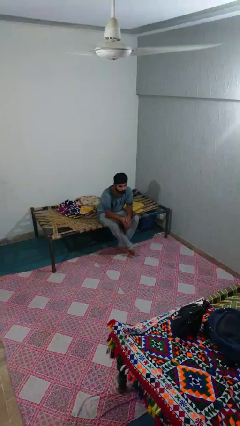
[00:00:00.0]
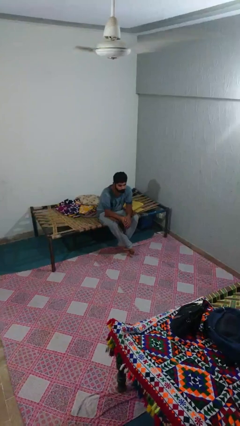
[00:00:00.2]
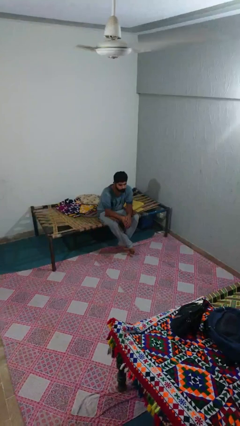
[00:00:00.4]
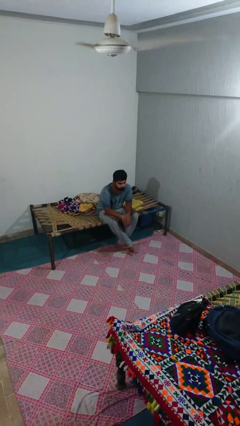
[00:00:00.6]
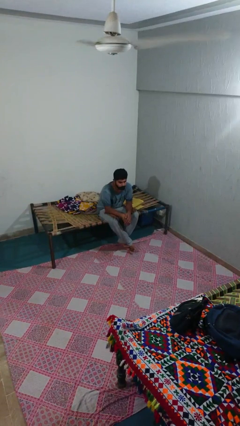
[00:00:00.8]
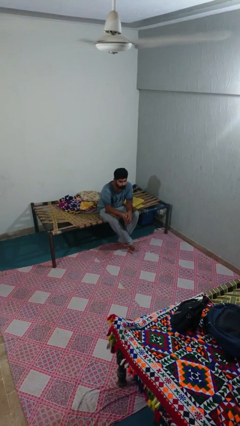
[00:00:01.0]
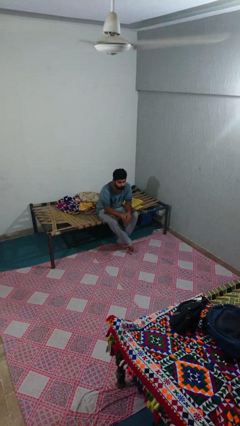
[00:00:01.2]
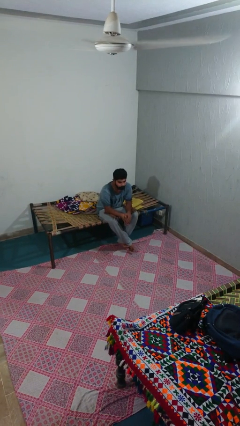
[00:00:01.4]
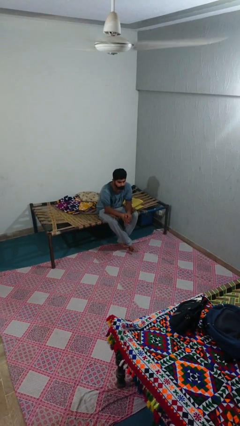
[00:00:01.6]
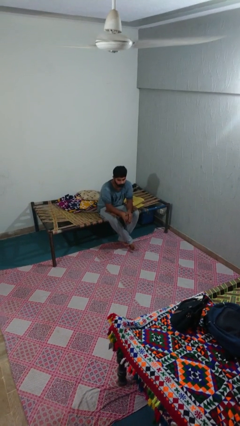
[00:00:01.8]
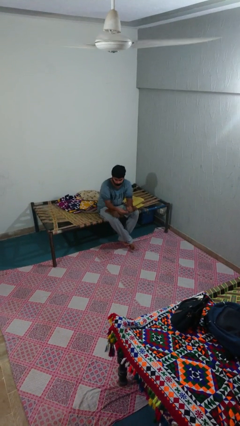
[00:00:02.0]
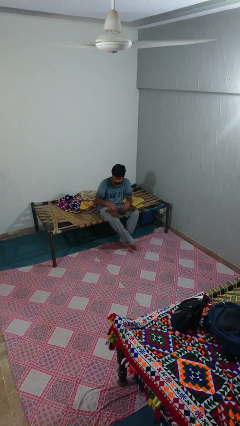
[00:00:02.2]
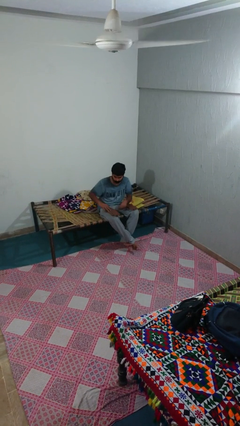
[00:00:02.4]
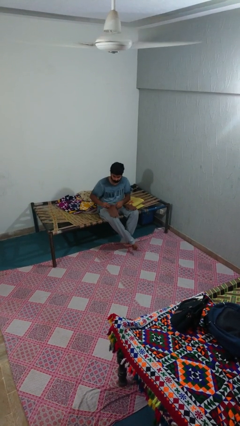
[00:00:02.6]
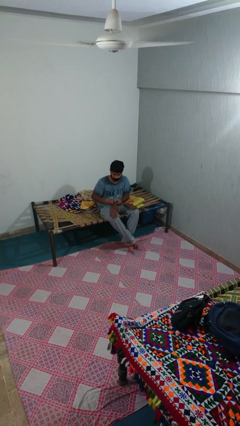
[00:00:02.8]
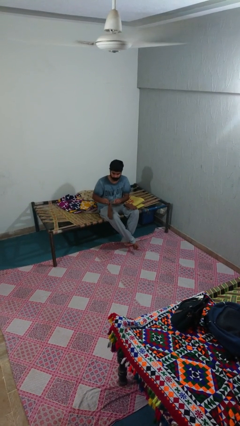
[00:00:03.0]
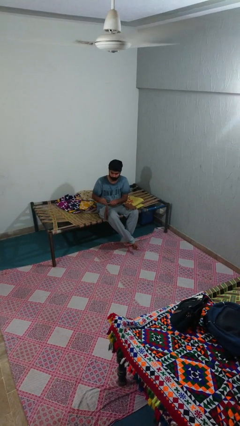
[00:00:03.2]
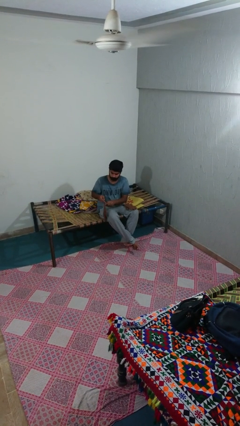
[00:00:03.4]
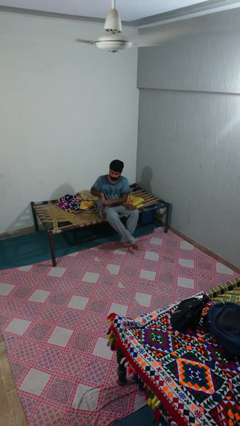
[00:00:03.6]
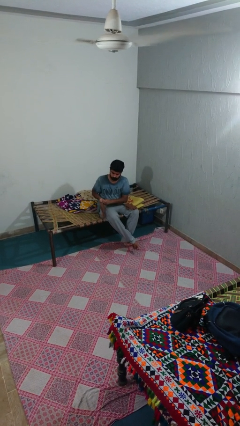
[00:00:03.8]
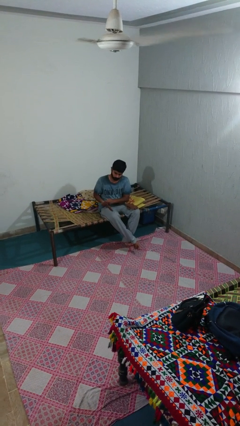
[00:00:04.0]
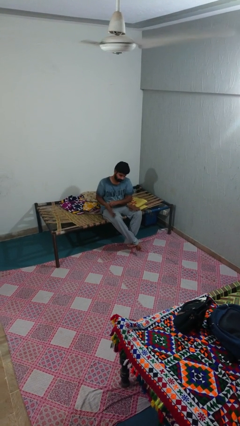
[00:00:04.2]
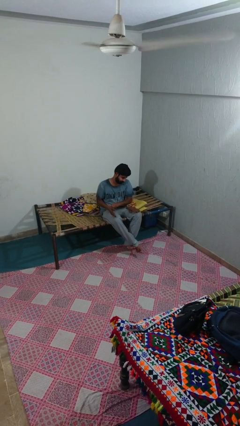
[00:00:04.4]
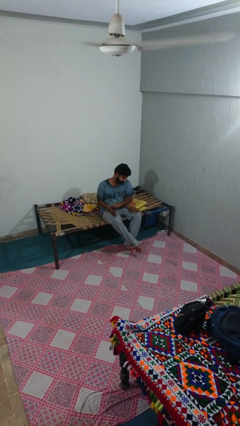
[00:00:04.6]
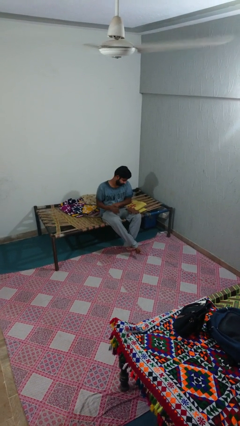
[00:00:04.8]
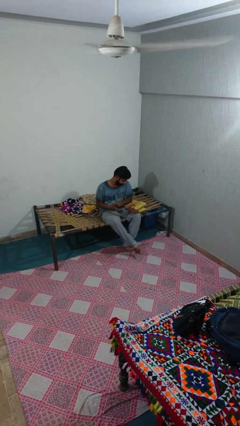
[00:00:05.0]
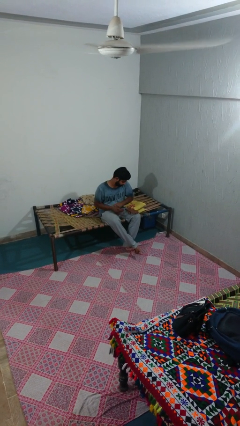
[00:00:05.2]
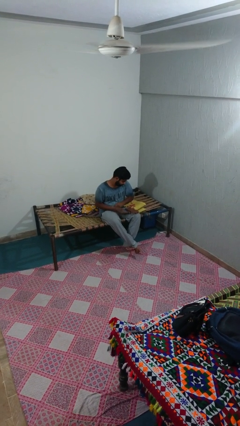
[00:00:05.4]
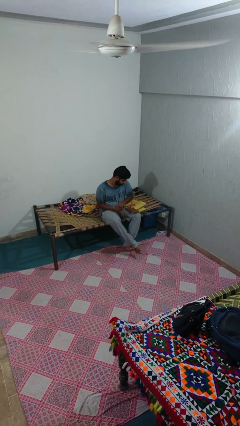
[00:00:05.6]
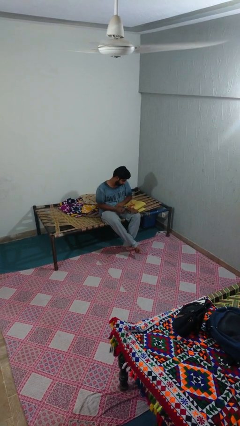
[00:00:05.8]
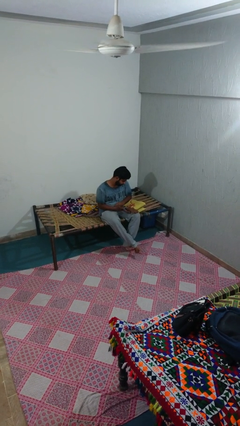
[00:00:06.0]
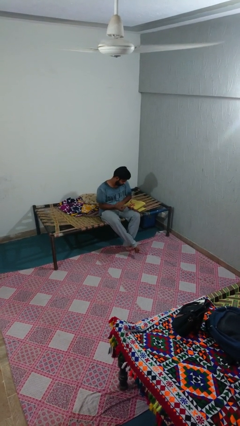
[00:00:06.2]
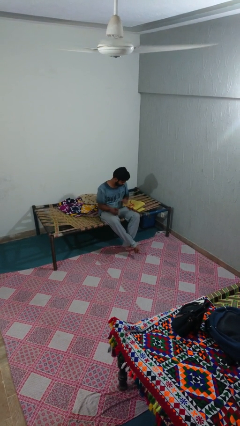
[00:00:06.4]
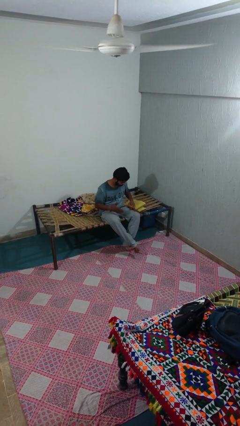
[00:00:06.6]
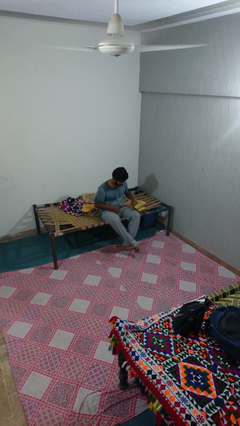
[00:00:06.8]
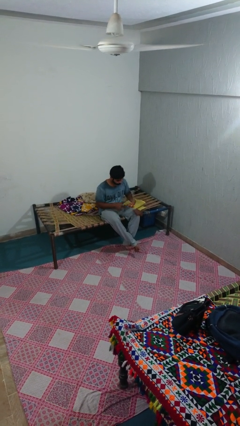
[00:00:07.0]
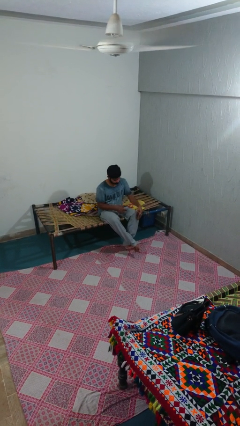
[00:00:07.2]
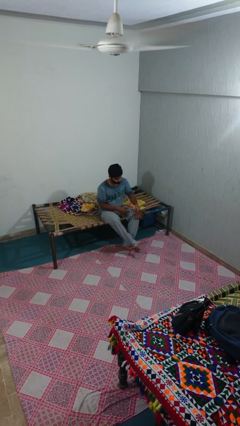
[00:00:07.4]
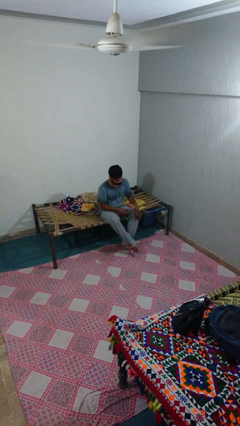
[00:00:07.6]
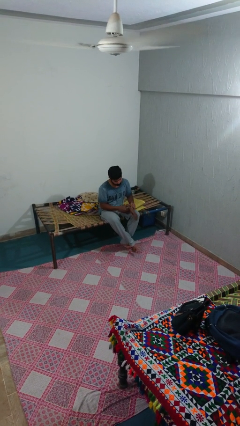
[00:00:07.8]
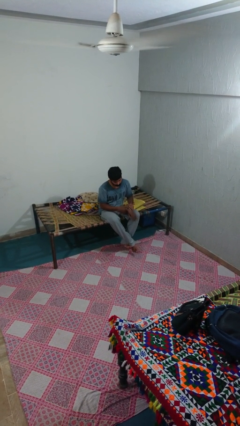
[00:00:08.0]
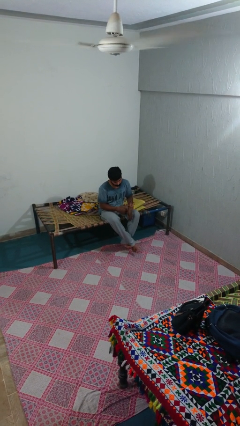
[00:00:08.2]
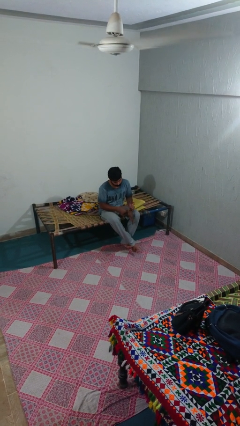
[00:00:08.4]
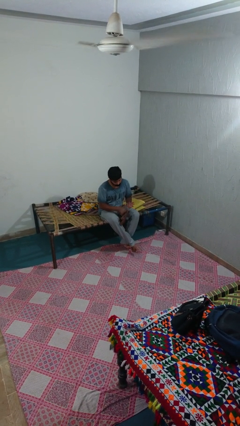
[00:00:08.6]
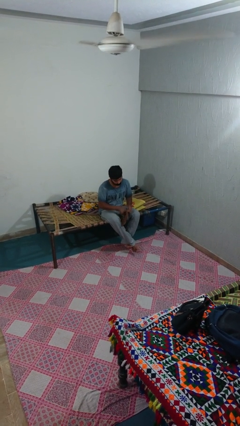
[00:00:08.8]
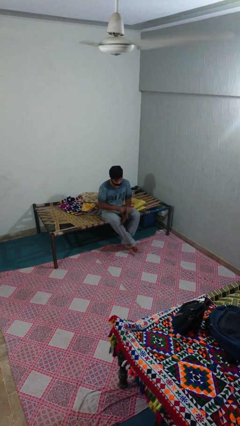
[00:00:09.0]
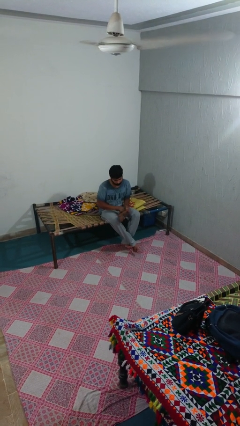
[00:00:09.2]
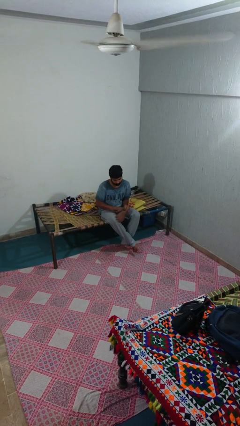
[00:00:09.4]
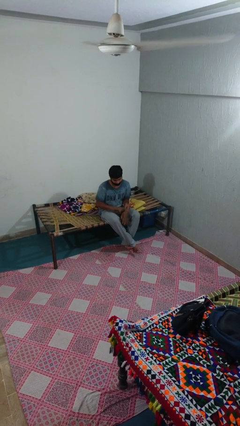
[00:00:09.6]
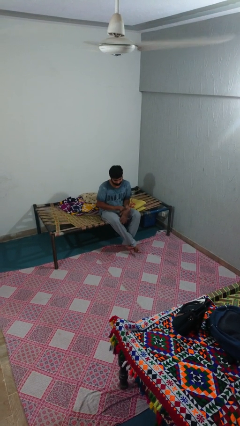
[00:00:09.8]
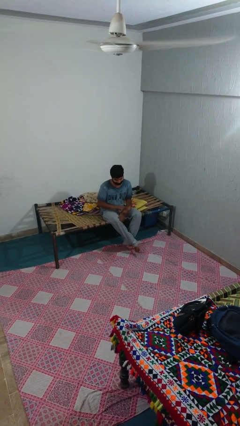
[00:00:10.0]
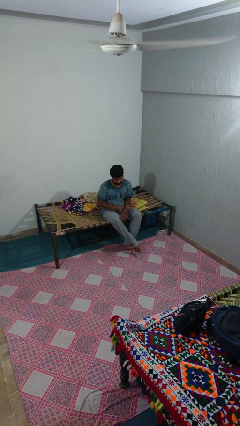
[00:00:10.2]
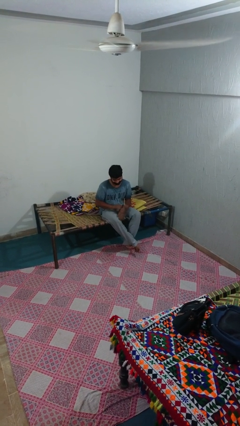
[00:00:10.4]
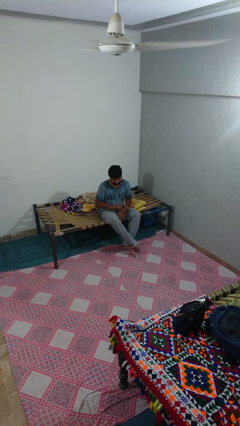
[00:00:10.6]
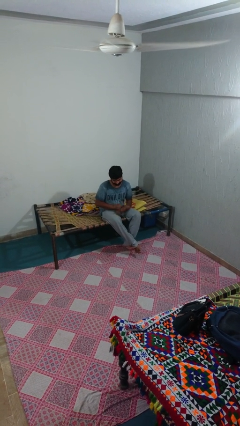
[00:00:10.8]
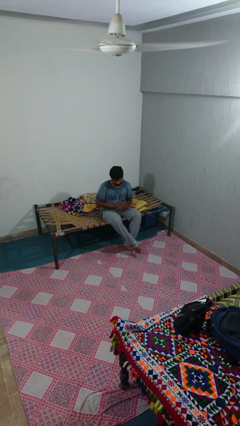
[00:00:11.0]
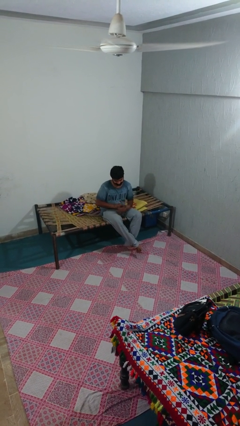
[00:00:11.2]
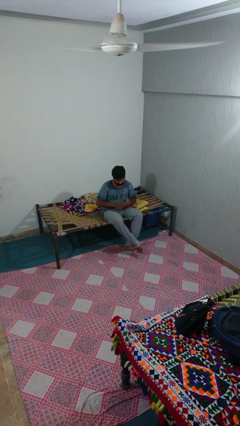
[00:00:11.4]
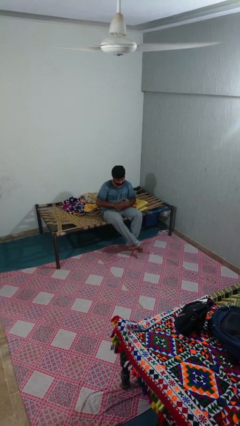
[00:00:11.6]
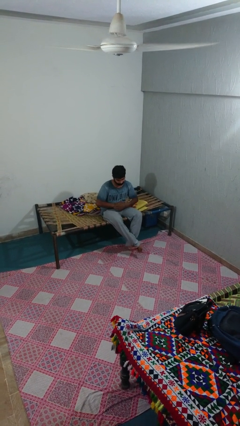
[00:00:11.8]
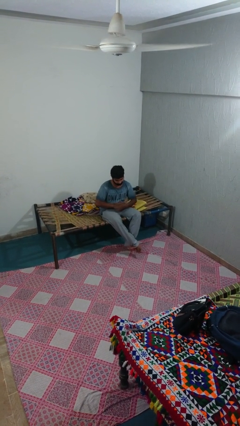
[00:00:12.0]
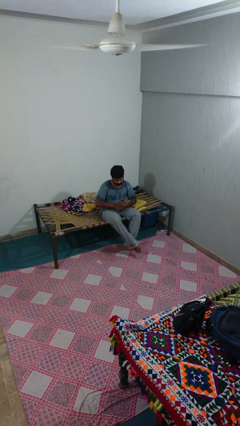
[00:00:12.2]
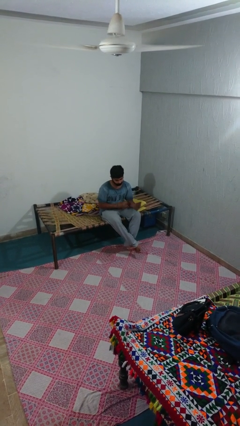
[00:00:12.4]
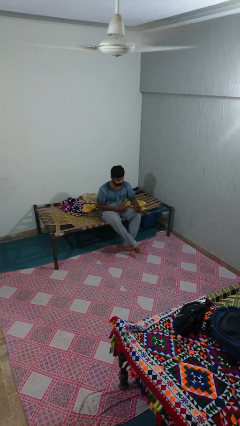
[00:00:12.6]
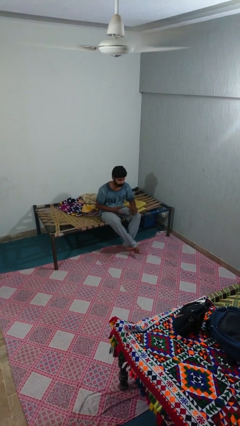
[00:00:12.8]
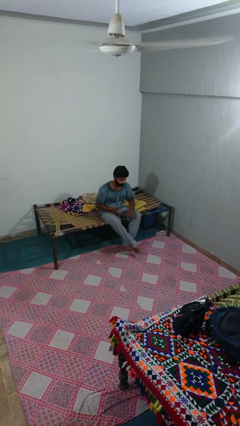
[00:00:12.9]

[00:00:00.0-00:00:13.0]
person puts on gloves

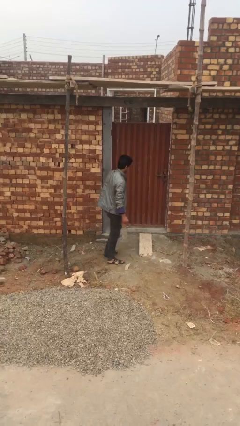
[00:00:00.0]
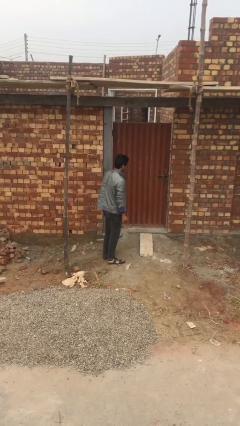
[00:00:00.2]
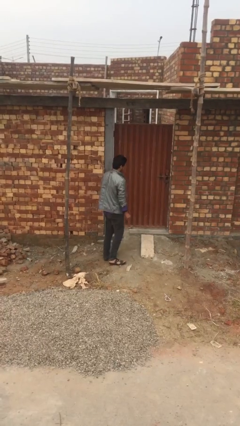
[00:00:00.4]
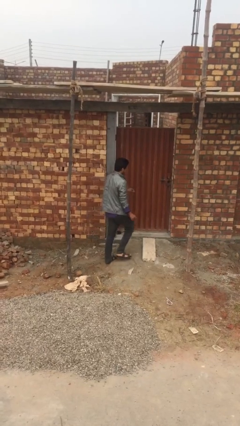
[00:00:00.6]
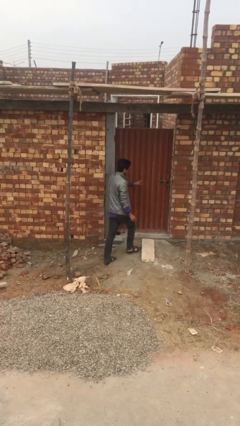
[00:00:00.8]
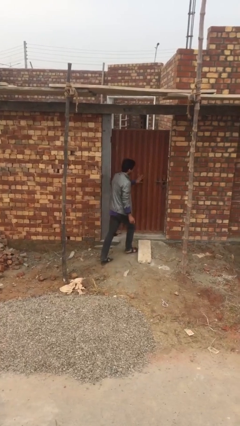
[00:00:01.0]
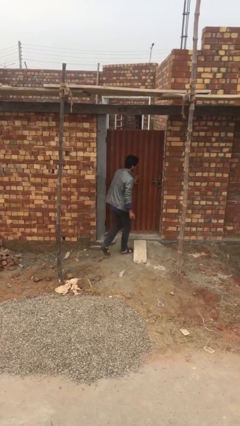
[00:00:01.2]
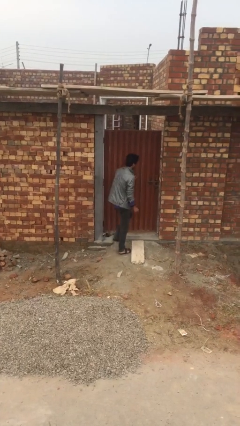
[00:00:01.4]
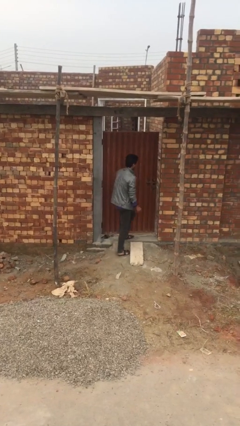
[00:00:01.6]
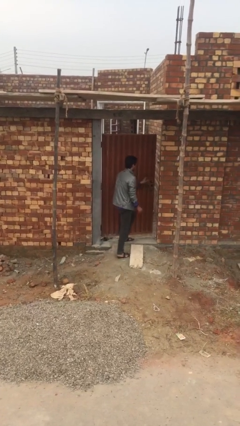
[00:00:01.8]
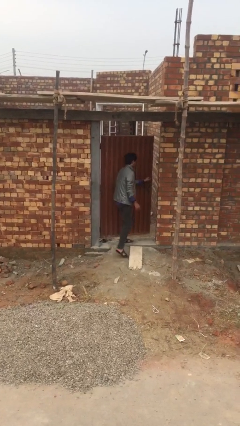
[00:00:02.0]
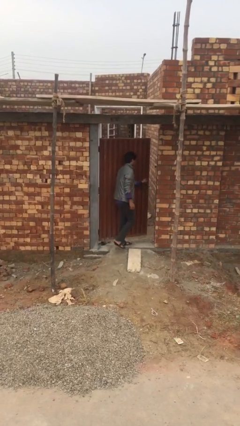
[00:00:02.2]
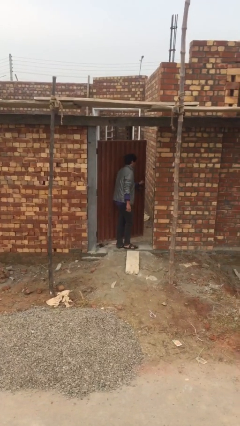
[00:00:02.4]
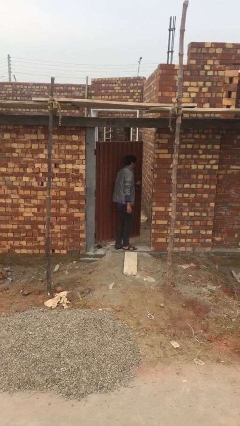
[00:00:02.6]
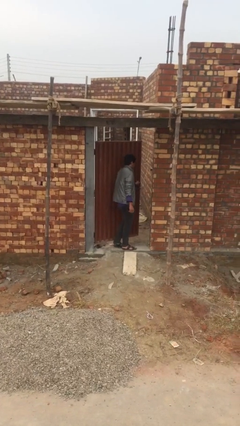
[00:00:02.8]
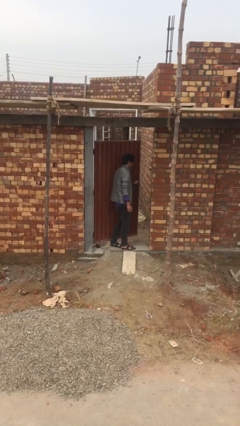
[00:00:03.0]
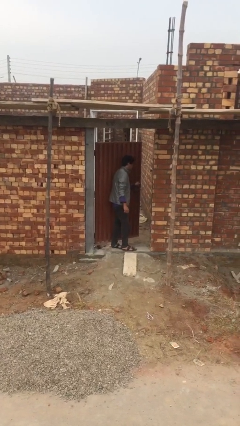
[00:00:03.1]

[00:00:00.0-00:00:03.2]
person opens facility door

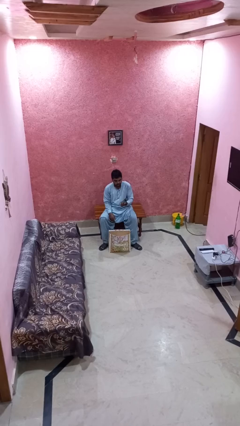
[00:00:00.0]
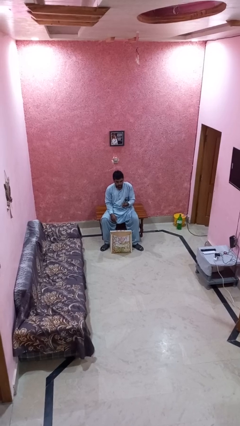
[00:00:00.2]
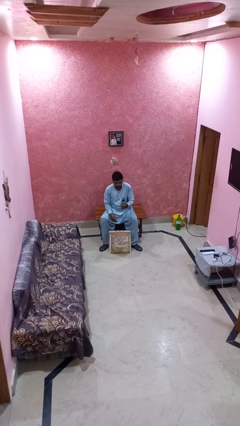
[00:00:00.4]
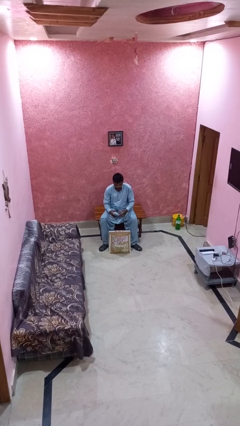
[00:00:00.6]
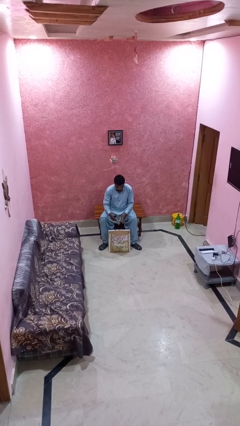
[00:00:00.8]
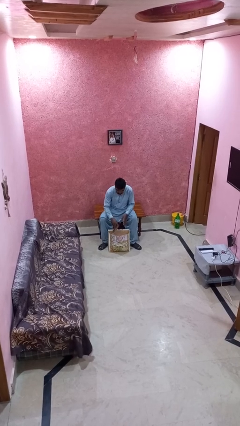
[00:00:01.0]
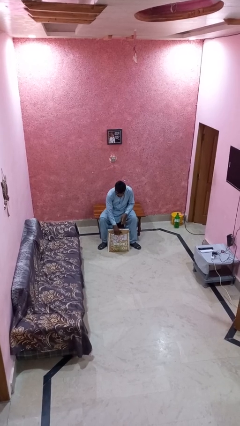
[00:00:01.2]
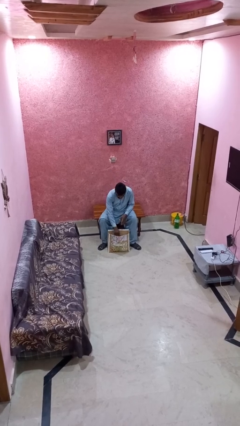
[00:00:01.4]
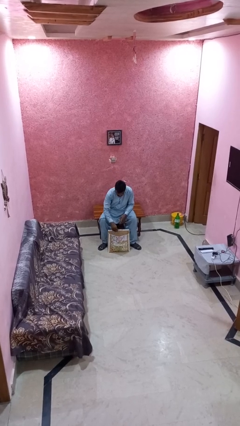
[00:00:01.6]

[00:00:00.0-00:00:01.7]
person puts object into bag

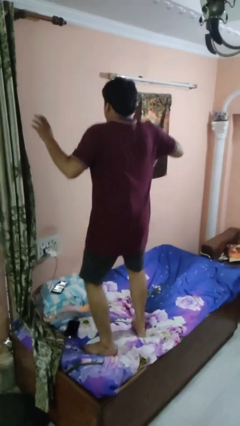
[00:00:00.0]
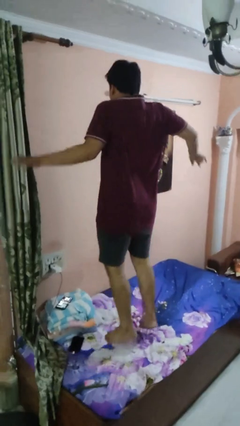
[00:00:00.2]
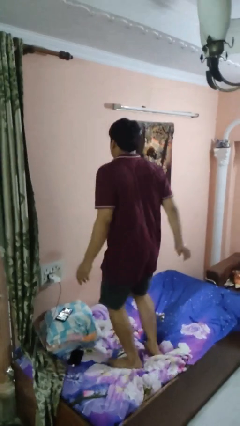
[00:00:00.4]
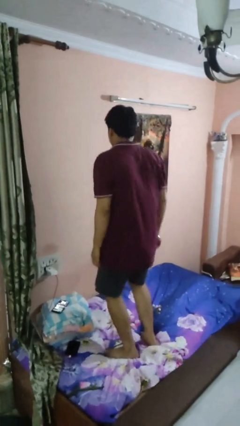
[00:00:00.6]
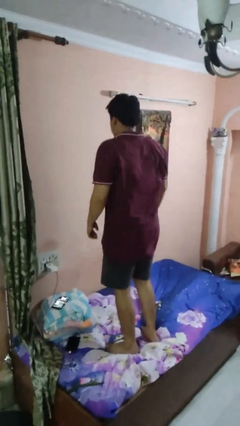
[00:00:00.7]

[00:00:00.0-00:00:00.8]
person jumps on bed
